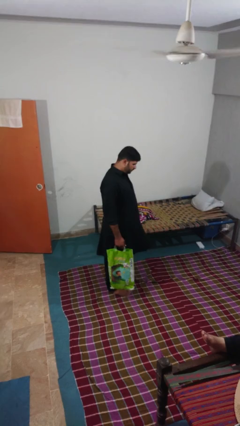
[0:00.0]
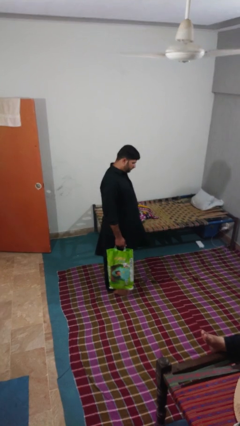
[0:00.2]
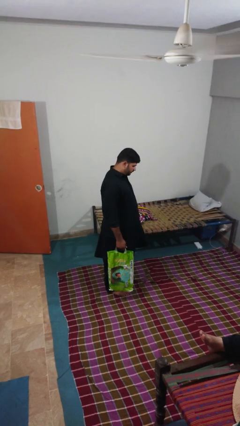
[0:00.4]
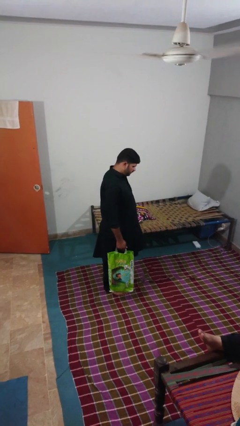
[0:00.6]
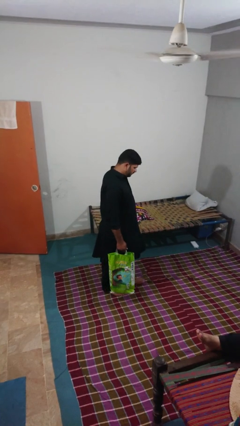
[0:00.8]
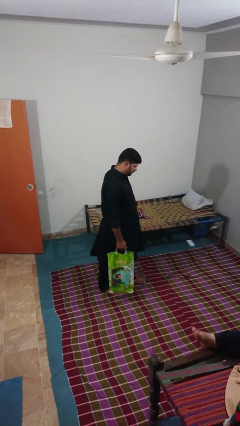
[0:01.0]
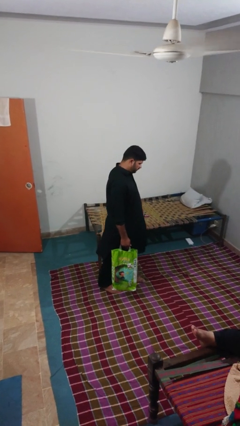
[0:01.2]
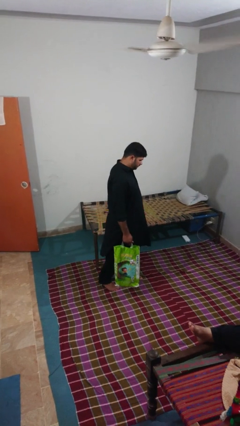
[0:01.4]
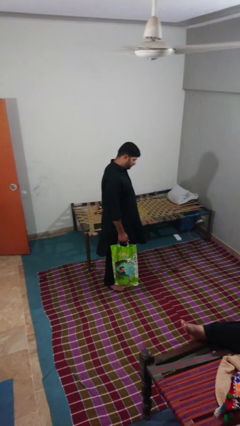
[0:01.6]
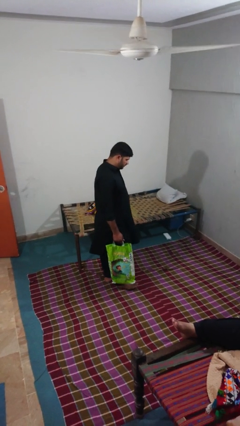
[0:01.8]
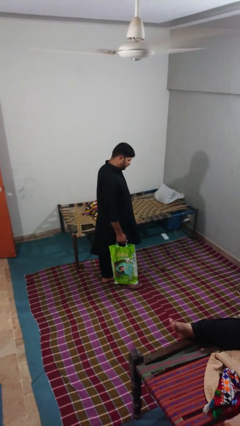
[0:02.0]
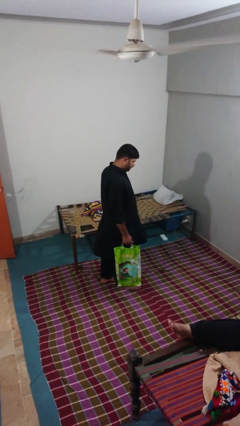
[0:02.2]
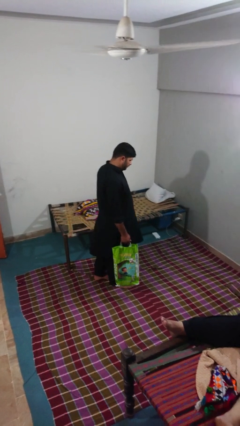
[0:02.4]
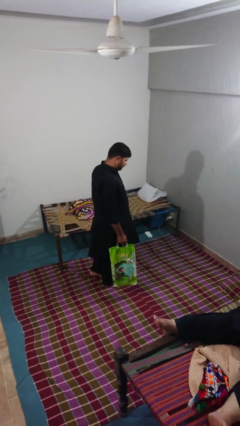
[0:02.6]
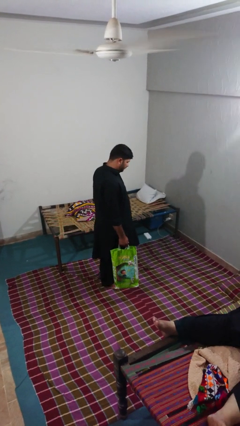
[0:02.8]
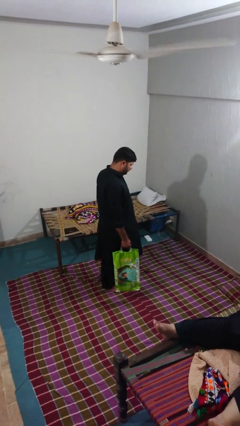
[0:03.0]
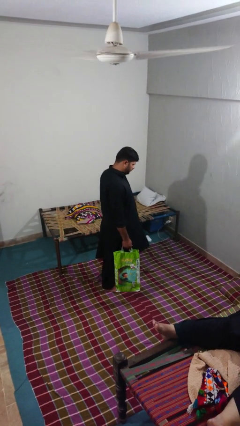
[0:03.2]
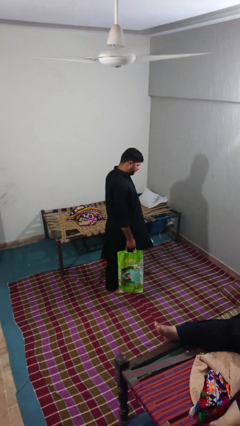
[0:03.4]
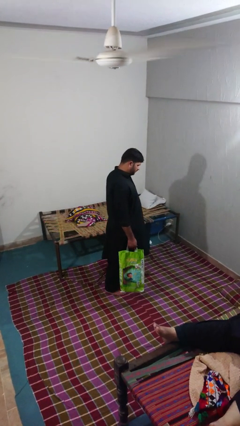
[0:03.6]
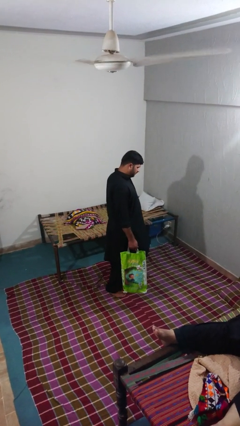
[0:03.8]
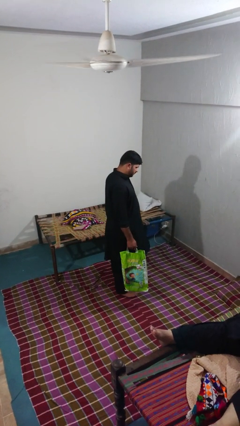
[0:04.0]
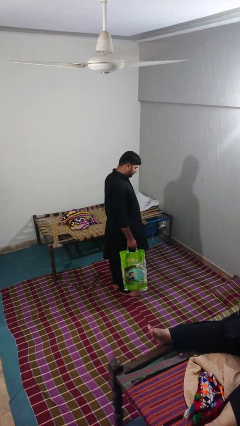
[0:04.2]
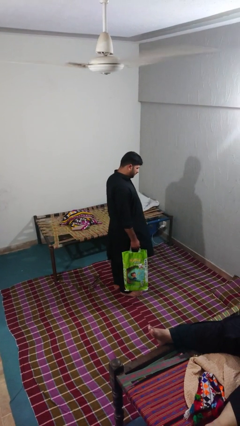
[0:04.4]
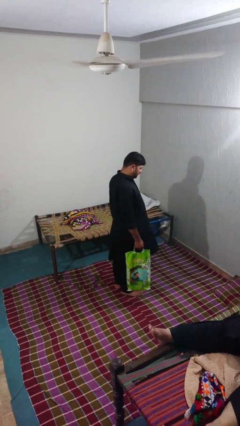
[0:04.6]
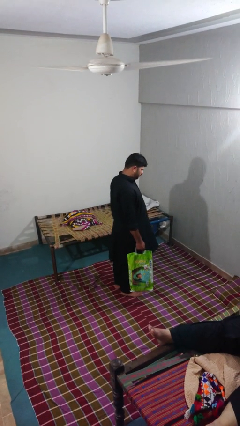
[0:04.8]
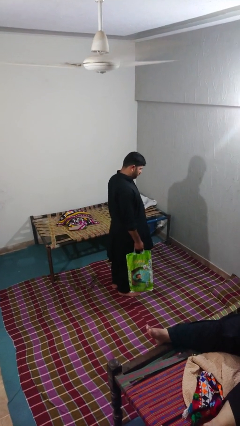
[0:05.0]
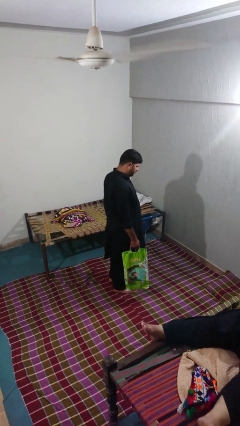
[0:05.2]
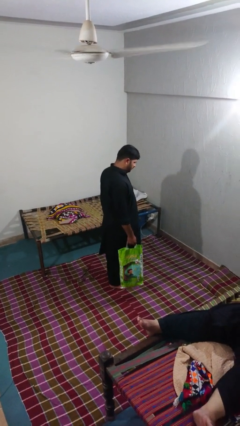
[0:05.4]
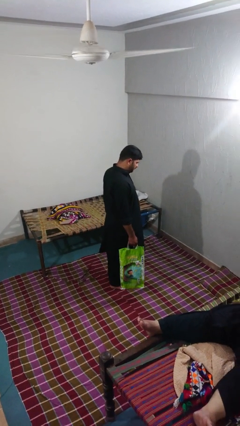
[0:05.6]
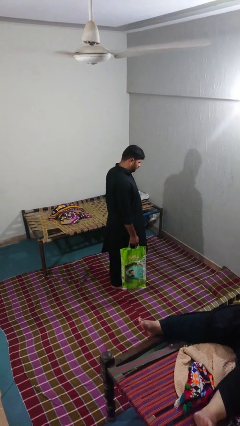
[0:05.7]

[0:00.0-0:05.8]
person carries groceries

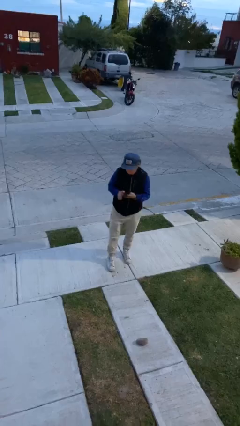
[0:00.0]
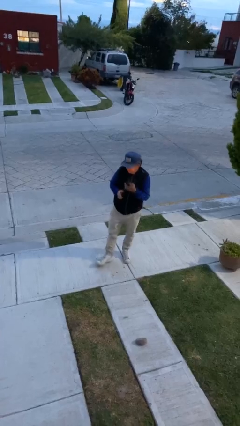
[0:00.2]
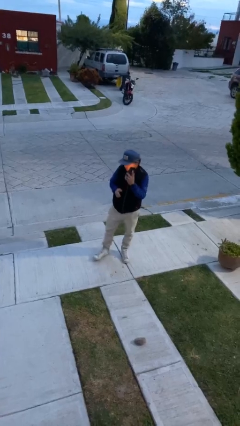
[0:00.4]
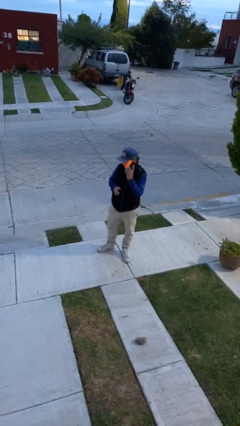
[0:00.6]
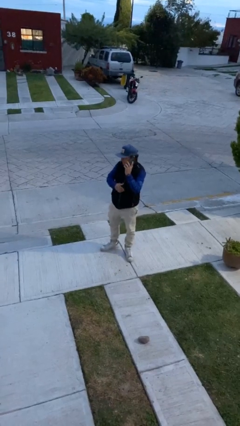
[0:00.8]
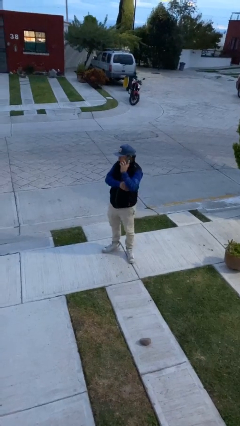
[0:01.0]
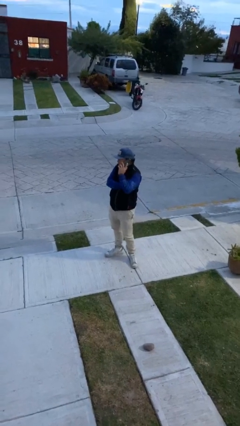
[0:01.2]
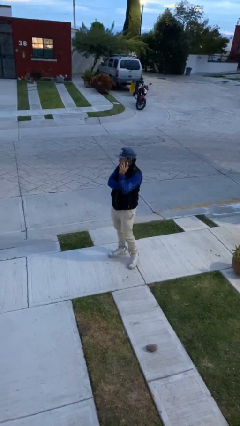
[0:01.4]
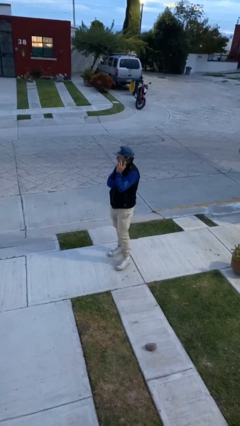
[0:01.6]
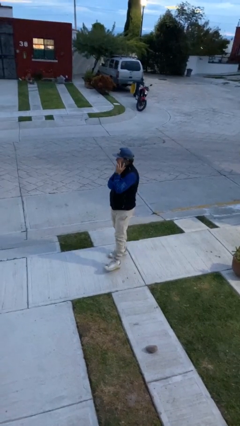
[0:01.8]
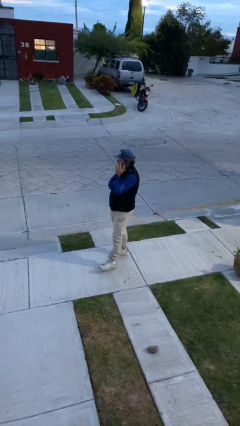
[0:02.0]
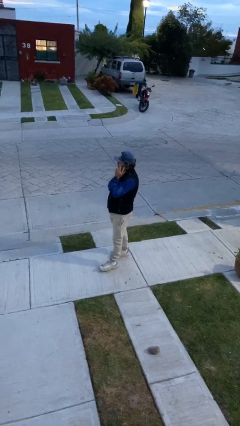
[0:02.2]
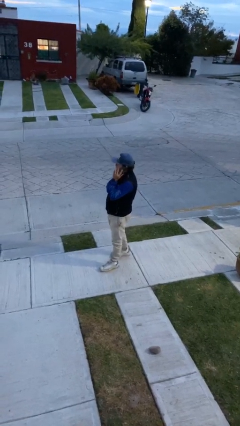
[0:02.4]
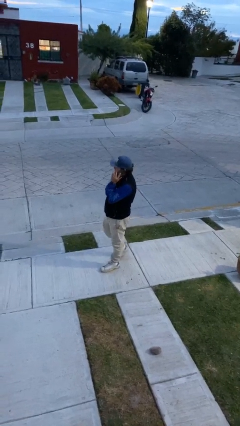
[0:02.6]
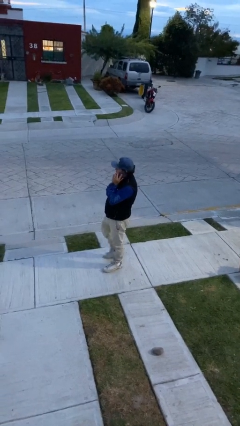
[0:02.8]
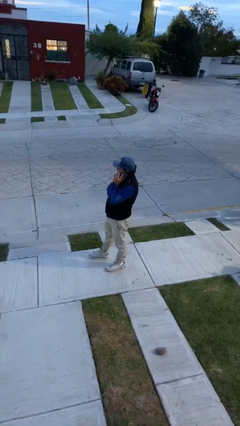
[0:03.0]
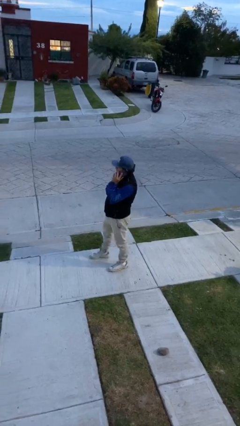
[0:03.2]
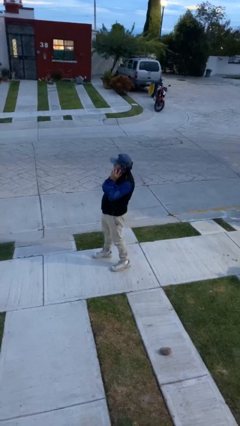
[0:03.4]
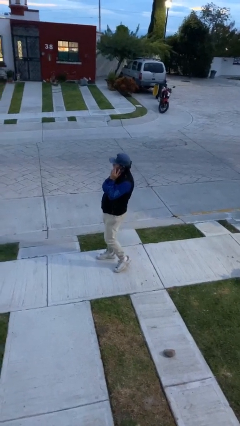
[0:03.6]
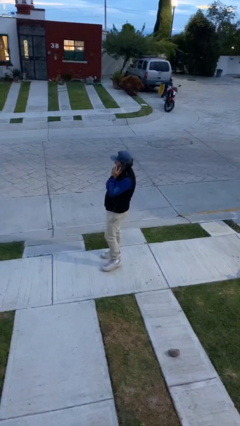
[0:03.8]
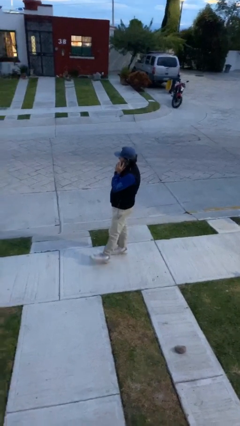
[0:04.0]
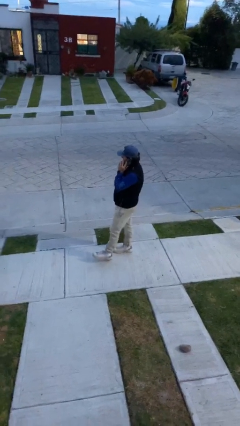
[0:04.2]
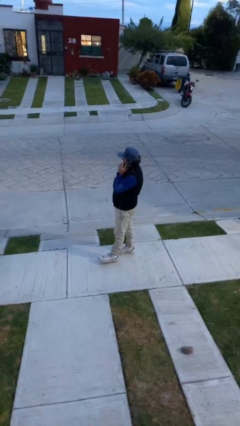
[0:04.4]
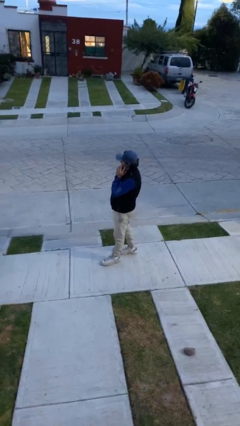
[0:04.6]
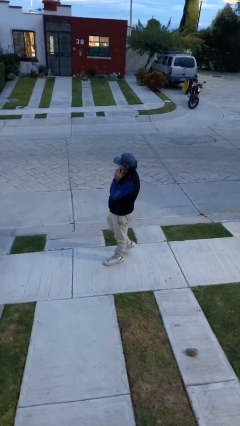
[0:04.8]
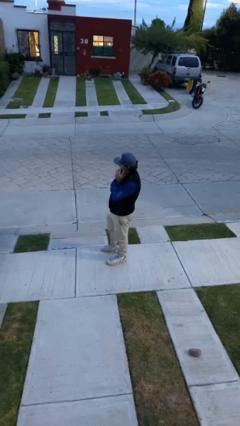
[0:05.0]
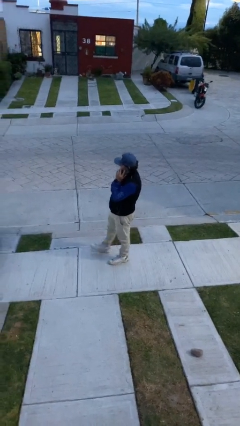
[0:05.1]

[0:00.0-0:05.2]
person talks on phone

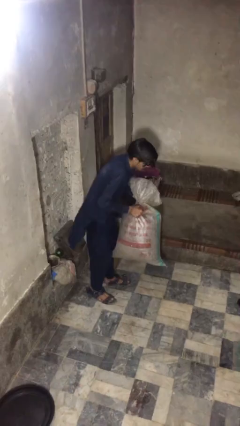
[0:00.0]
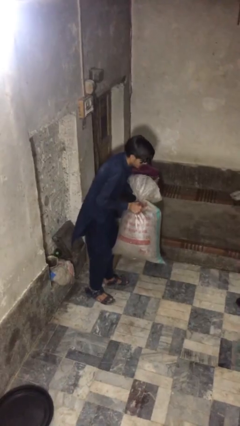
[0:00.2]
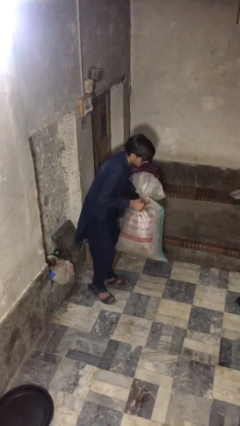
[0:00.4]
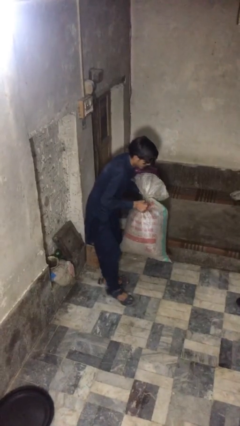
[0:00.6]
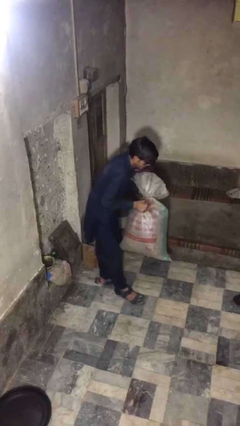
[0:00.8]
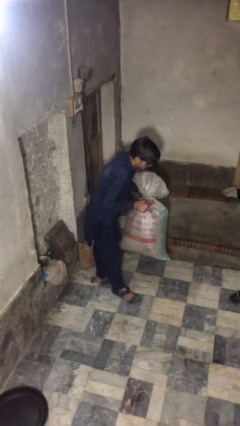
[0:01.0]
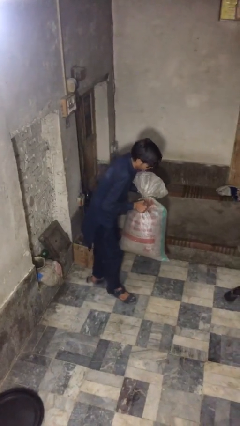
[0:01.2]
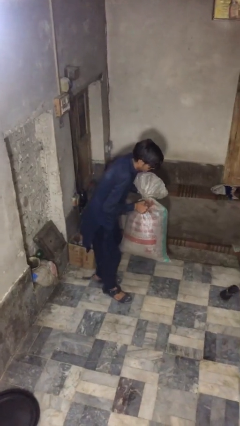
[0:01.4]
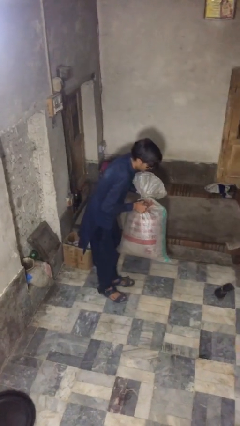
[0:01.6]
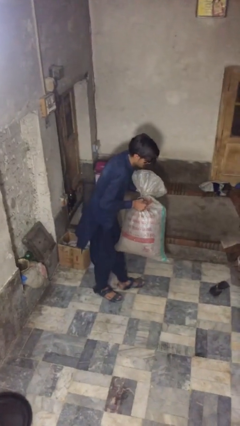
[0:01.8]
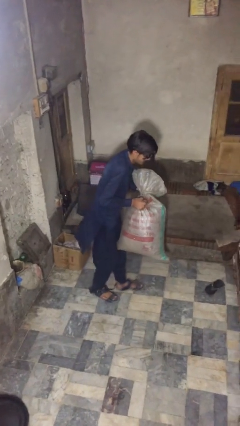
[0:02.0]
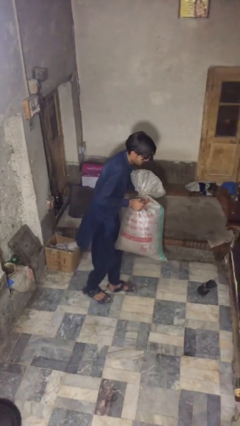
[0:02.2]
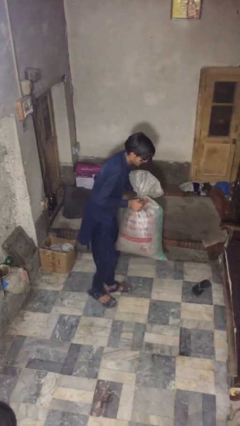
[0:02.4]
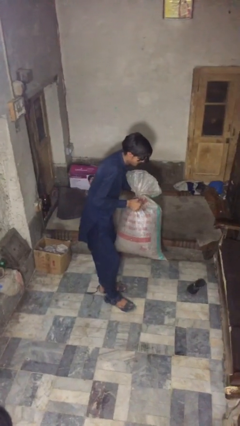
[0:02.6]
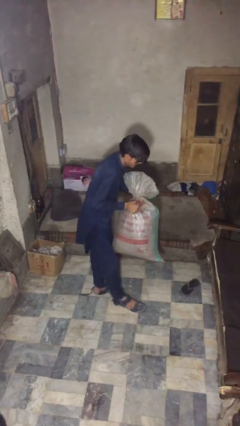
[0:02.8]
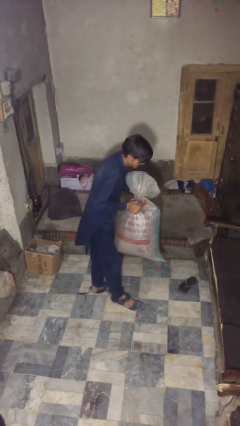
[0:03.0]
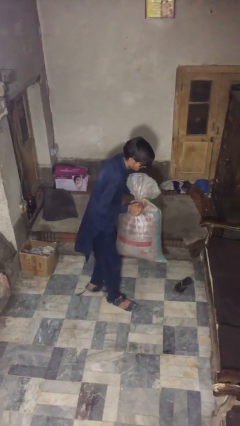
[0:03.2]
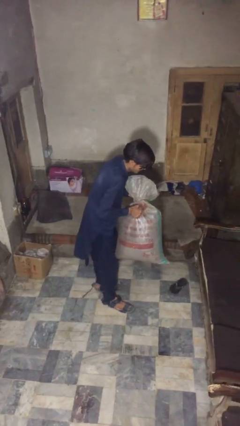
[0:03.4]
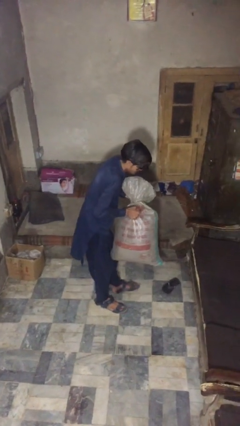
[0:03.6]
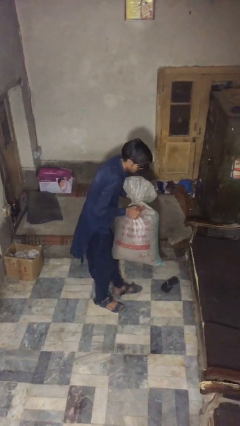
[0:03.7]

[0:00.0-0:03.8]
person carries heavy object

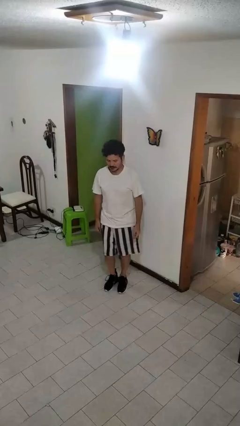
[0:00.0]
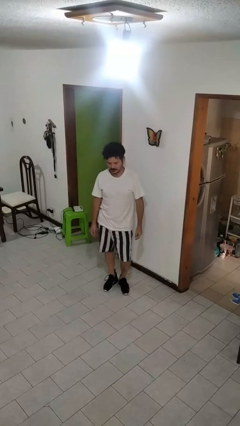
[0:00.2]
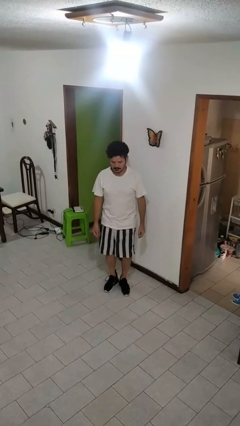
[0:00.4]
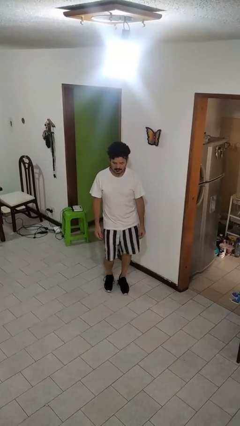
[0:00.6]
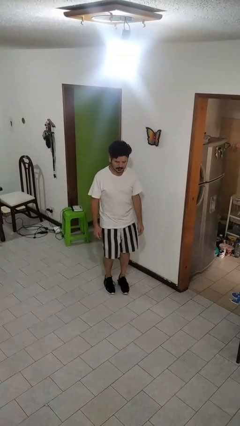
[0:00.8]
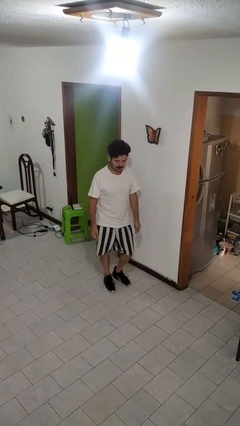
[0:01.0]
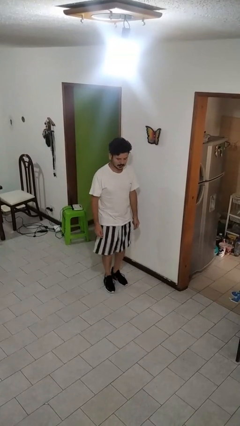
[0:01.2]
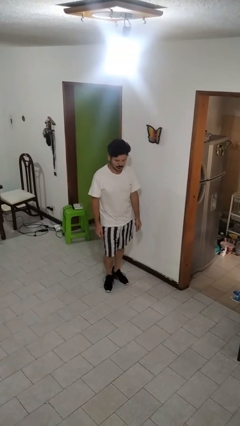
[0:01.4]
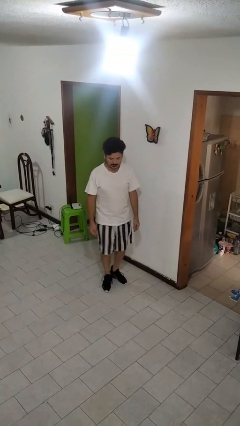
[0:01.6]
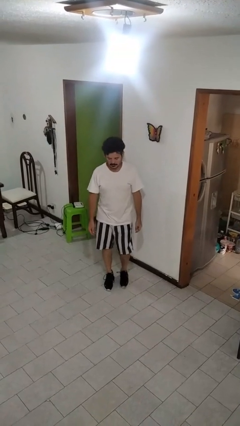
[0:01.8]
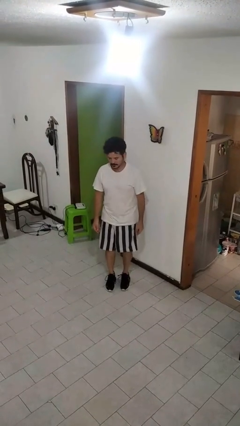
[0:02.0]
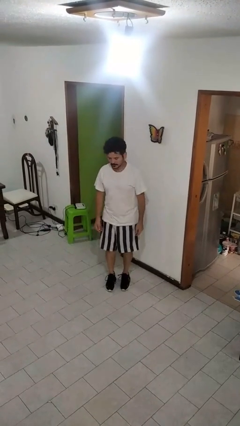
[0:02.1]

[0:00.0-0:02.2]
person dances in place

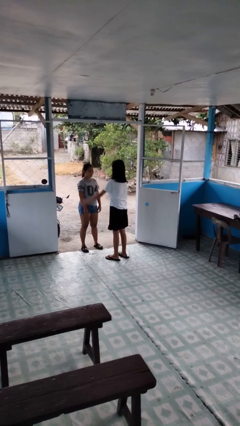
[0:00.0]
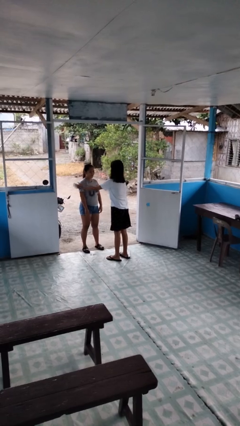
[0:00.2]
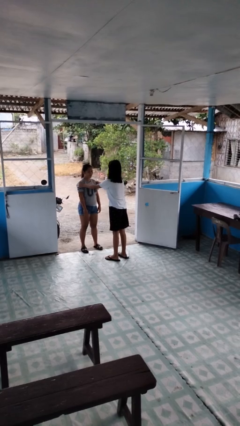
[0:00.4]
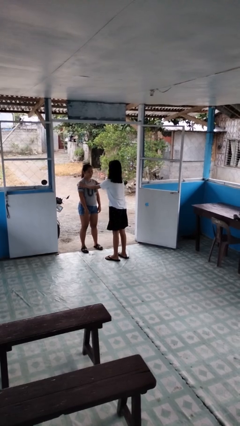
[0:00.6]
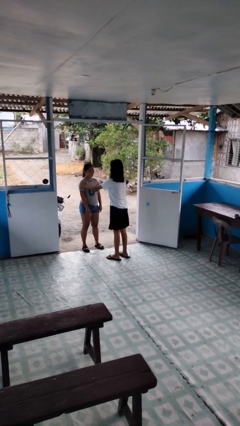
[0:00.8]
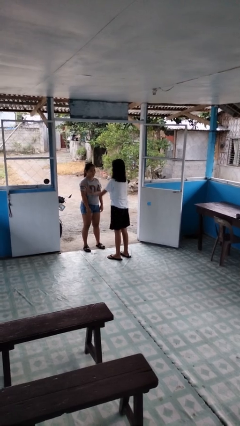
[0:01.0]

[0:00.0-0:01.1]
person pounds shoulders of person
